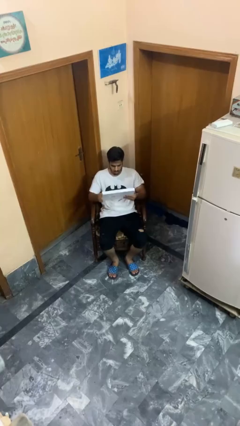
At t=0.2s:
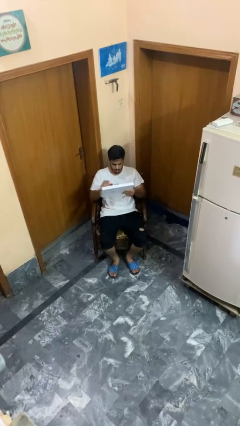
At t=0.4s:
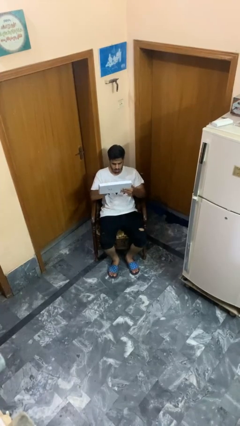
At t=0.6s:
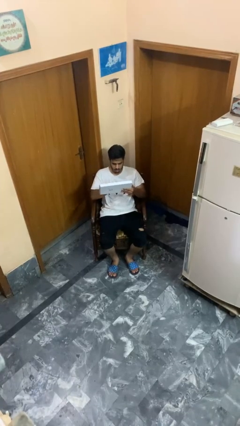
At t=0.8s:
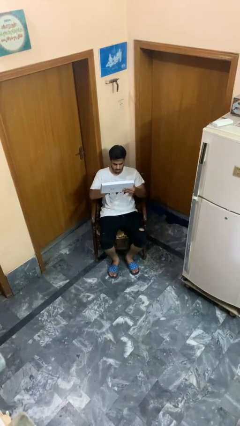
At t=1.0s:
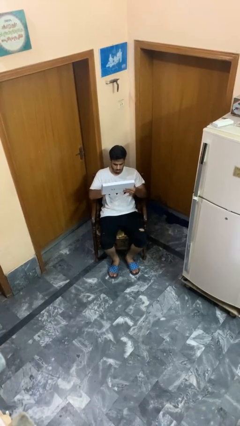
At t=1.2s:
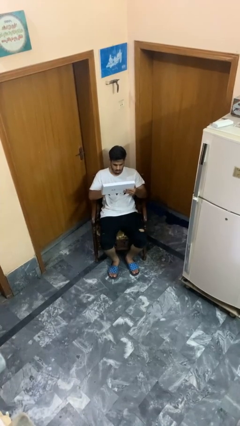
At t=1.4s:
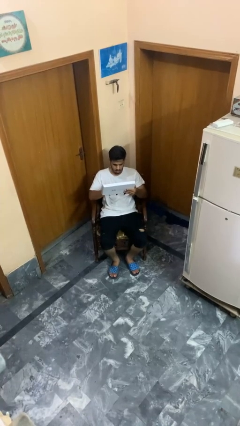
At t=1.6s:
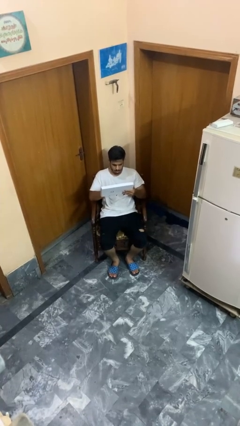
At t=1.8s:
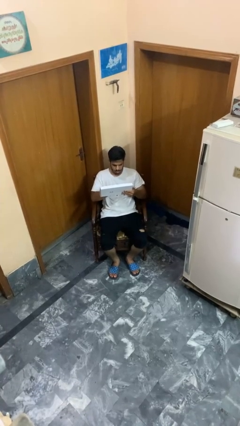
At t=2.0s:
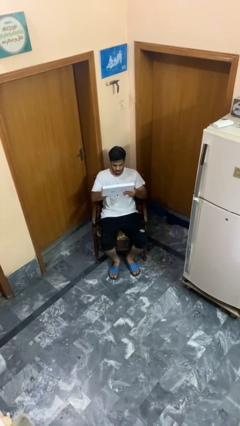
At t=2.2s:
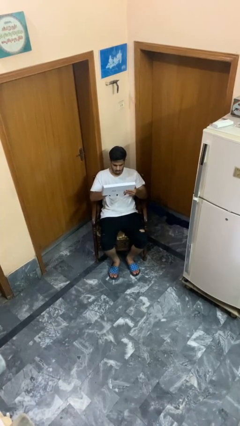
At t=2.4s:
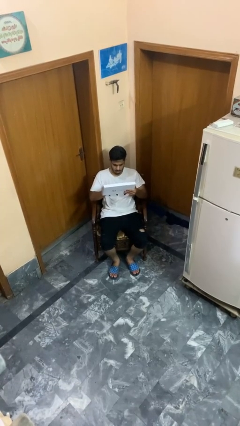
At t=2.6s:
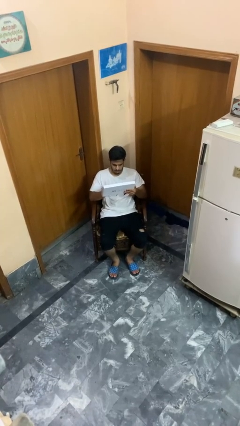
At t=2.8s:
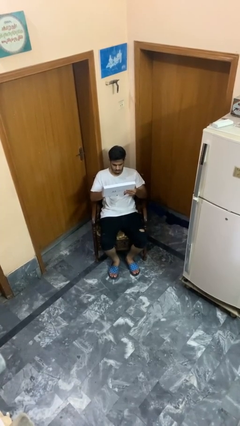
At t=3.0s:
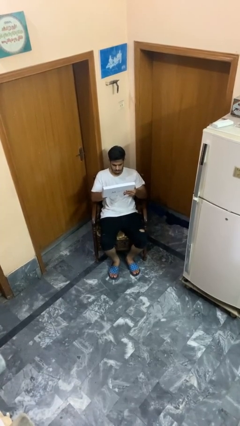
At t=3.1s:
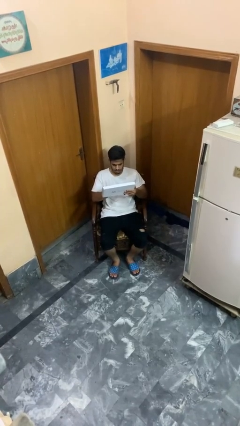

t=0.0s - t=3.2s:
person interacts with tablet

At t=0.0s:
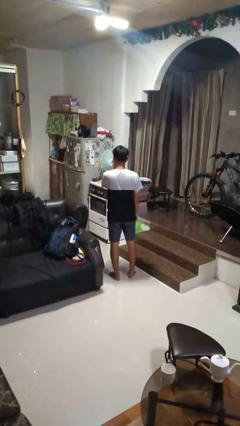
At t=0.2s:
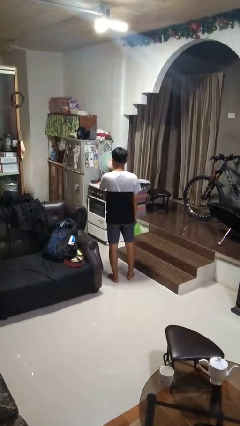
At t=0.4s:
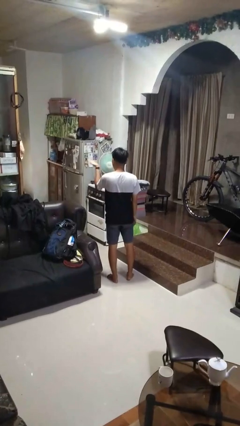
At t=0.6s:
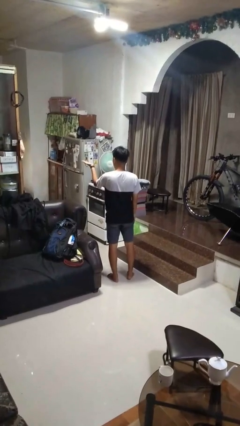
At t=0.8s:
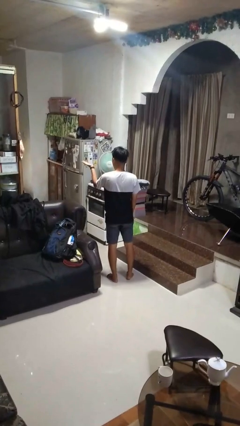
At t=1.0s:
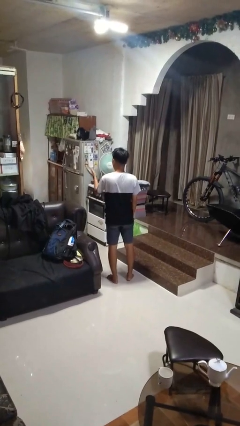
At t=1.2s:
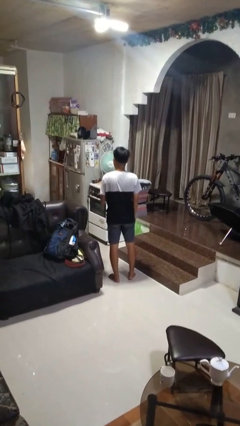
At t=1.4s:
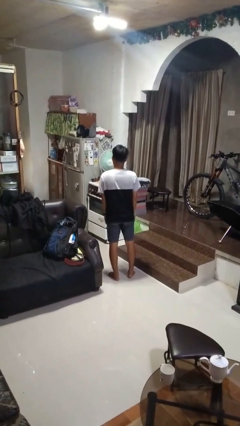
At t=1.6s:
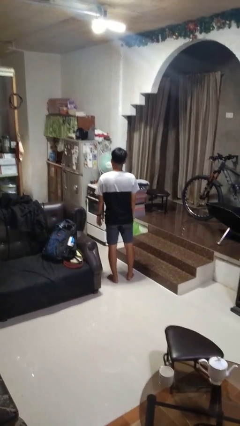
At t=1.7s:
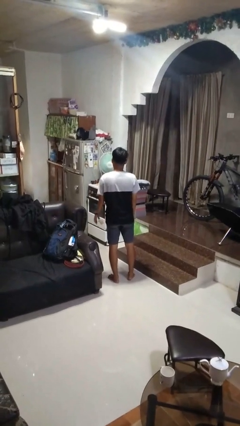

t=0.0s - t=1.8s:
person gestures blow kiss

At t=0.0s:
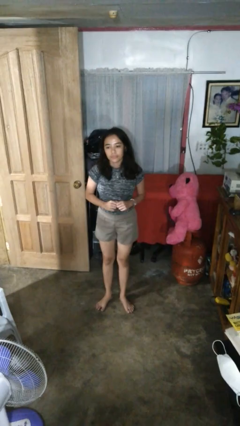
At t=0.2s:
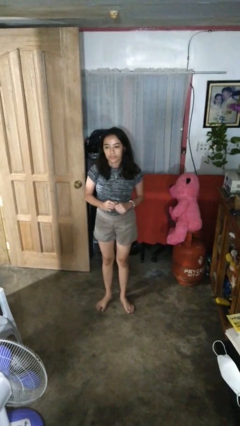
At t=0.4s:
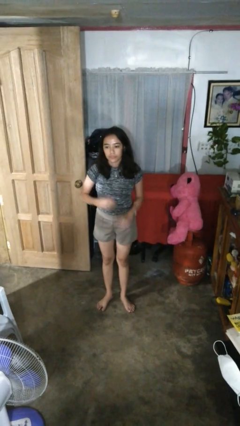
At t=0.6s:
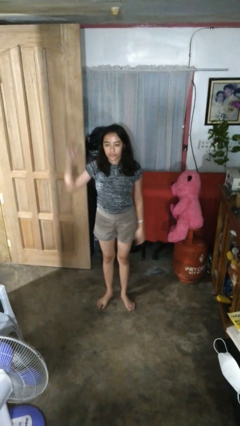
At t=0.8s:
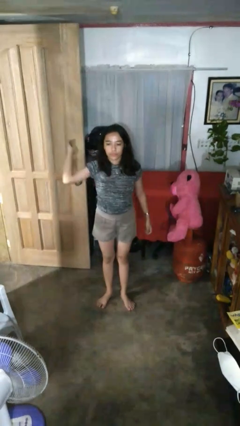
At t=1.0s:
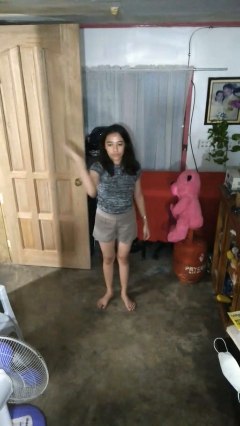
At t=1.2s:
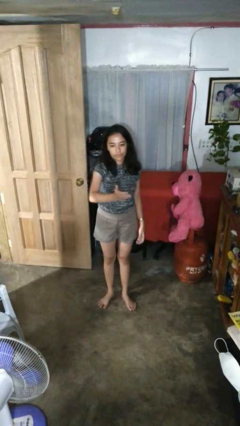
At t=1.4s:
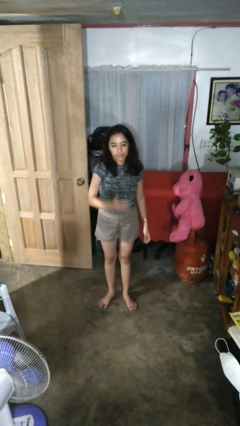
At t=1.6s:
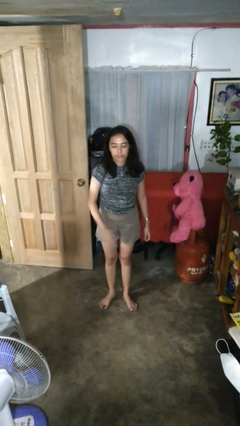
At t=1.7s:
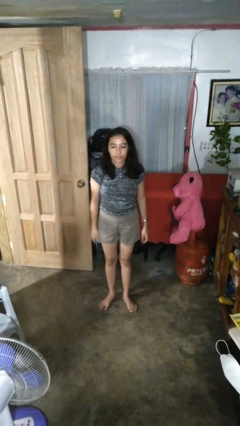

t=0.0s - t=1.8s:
person karate chop

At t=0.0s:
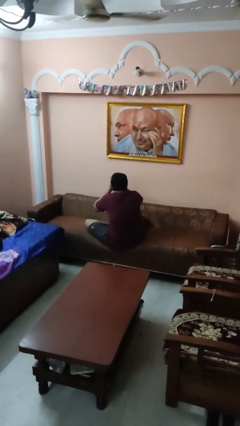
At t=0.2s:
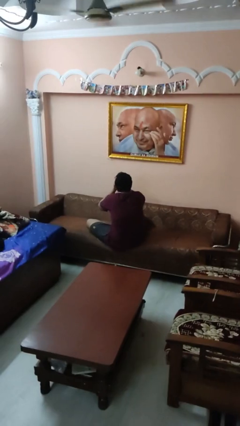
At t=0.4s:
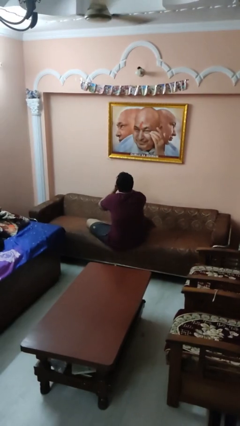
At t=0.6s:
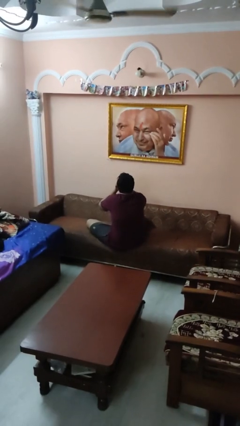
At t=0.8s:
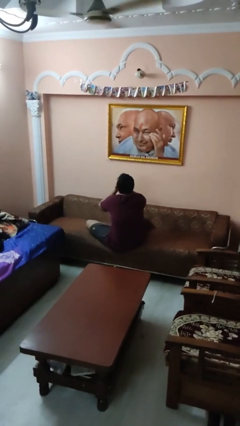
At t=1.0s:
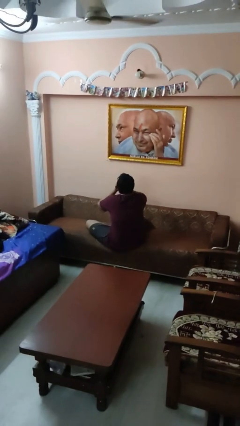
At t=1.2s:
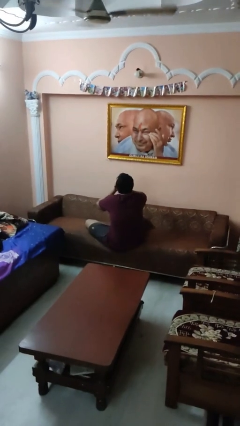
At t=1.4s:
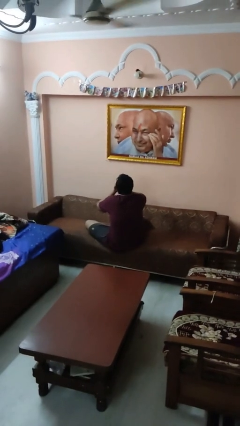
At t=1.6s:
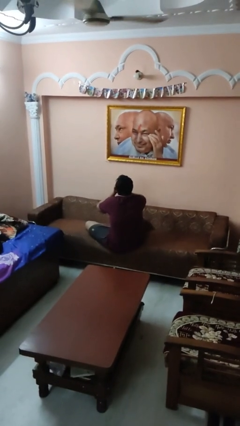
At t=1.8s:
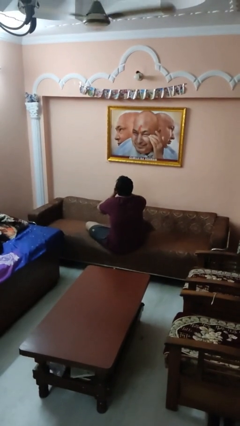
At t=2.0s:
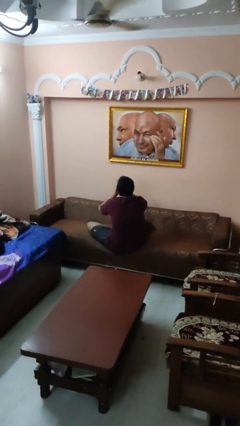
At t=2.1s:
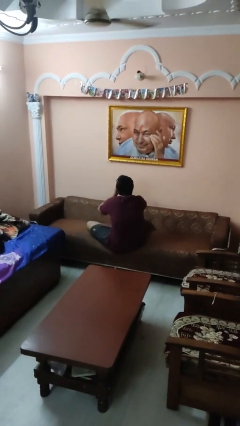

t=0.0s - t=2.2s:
person covers face with hands

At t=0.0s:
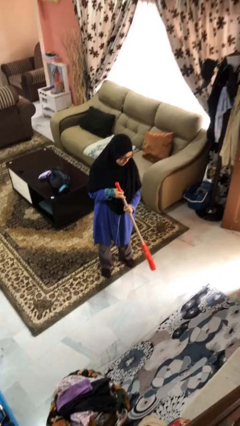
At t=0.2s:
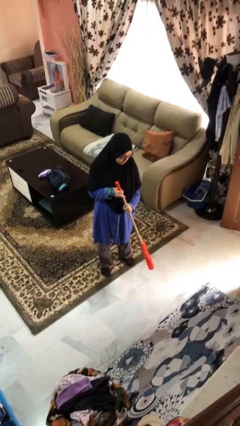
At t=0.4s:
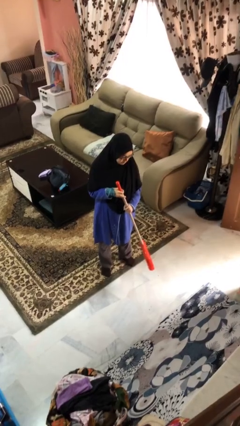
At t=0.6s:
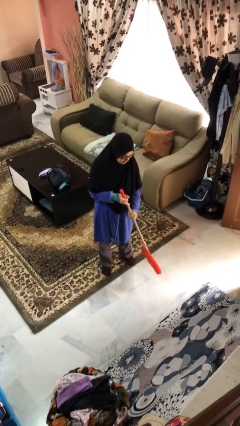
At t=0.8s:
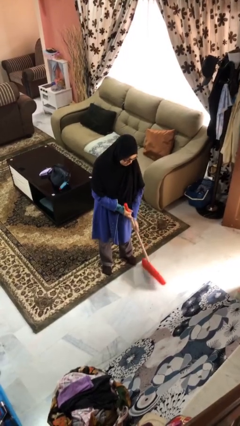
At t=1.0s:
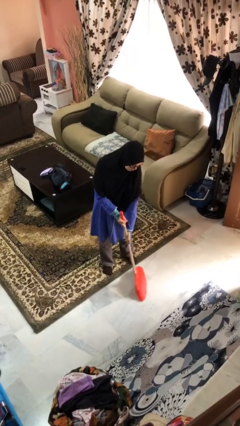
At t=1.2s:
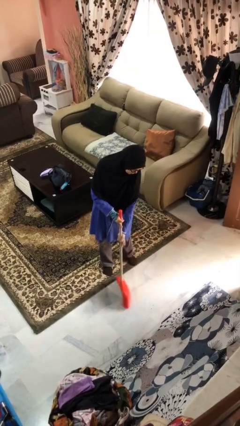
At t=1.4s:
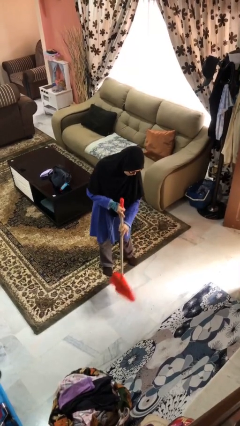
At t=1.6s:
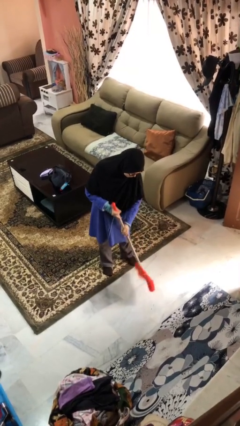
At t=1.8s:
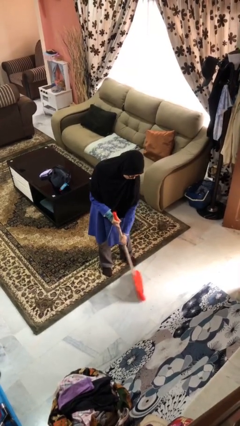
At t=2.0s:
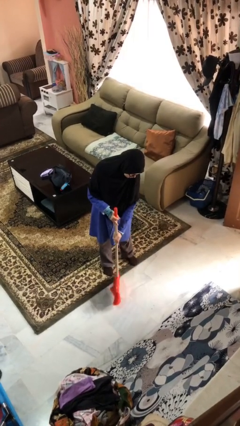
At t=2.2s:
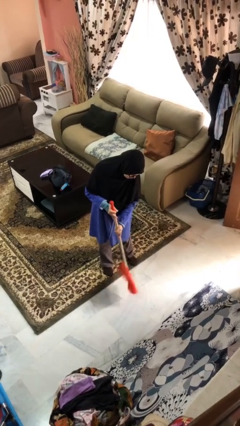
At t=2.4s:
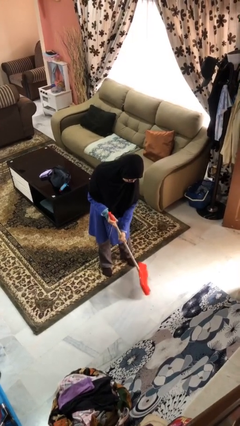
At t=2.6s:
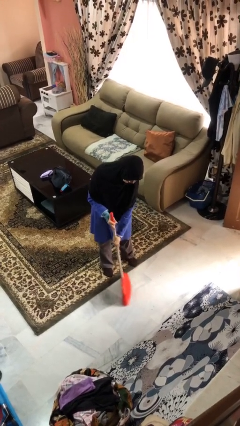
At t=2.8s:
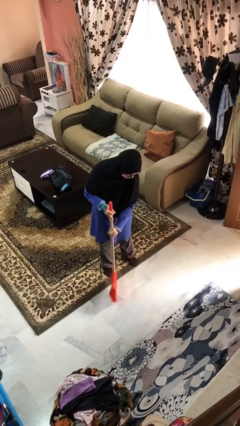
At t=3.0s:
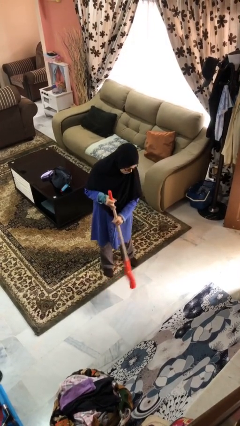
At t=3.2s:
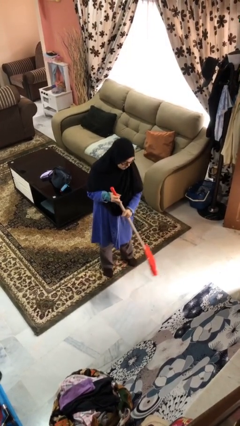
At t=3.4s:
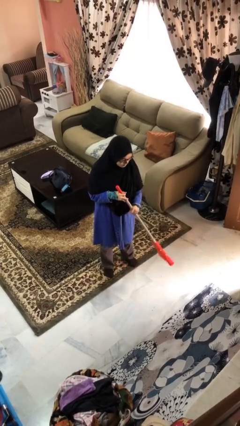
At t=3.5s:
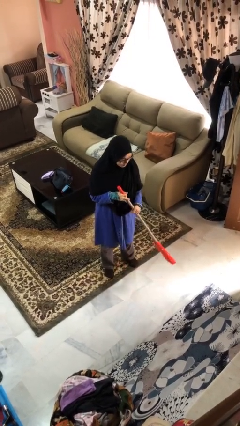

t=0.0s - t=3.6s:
person sweeps floor

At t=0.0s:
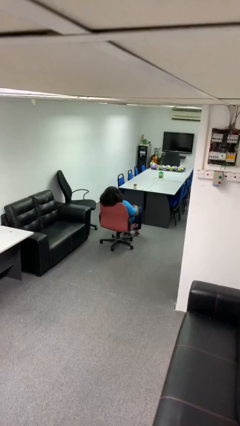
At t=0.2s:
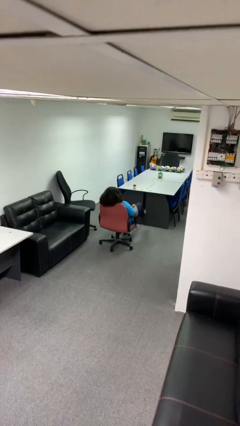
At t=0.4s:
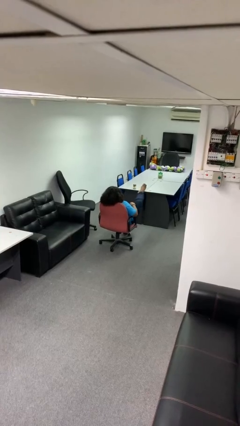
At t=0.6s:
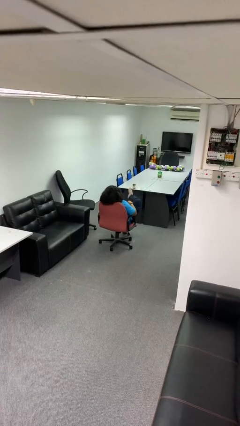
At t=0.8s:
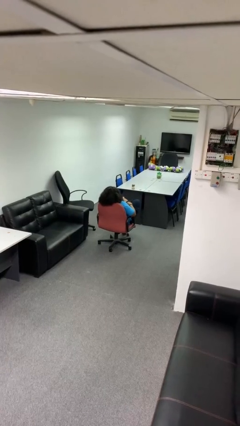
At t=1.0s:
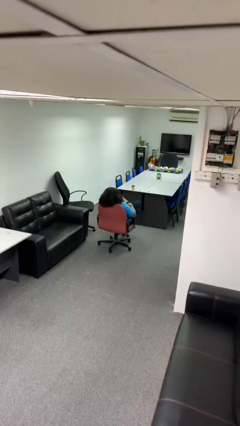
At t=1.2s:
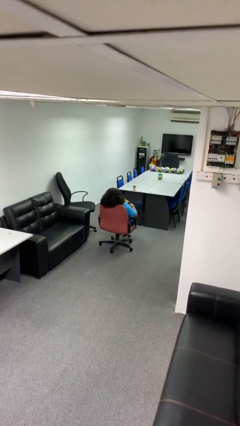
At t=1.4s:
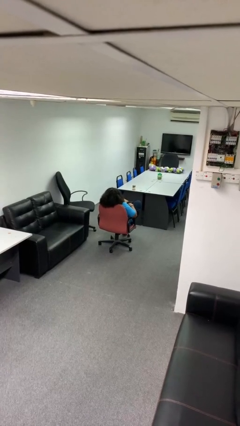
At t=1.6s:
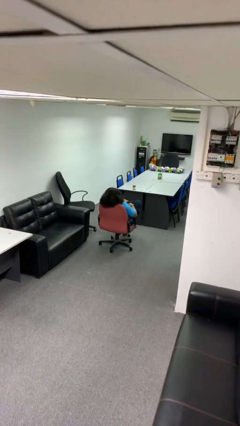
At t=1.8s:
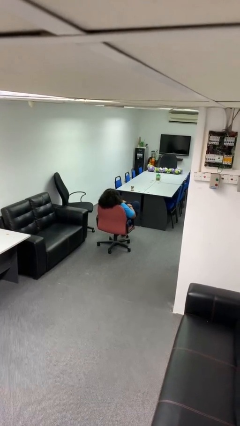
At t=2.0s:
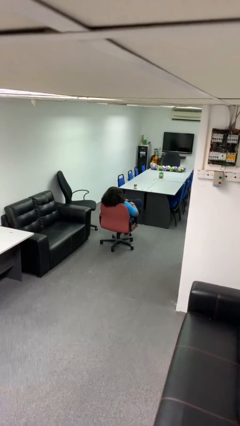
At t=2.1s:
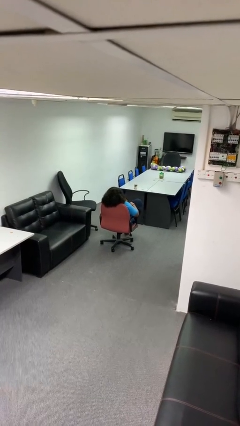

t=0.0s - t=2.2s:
person crosses legs

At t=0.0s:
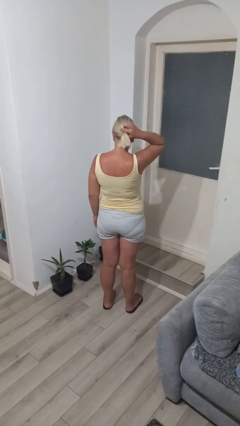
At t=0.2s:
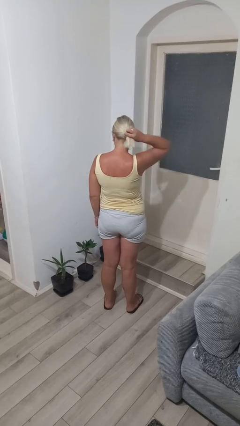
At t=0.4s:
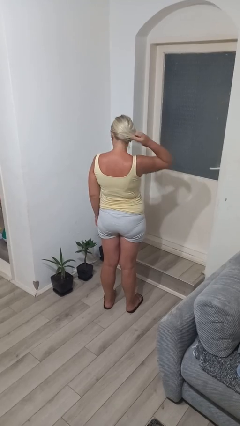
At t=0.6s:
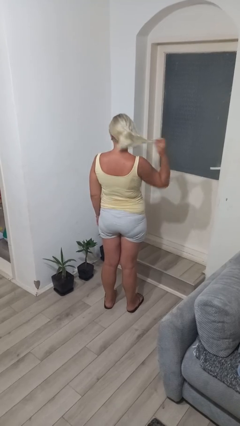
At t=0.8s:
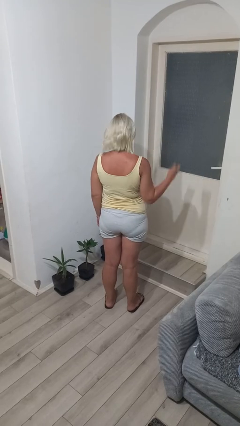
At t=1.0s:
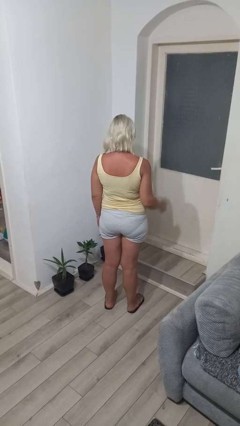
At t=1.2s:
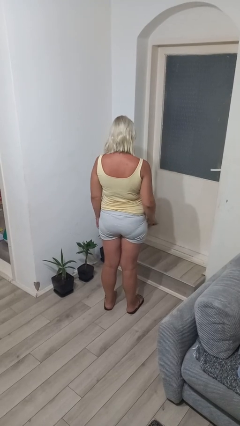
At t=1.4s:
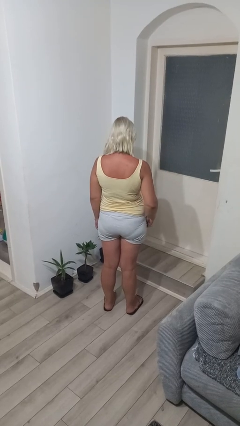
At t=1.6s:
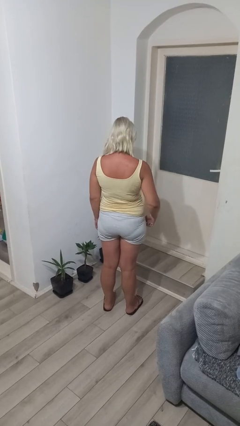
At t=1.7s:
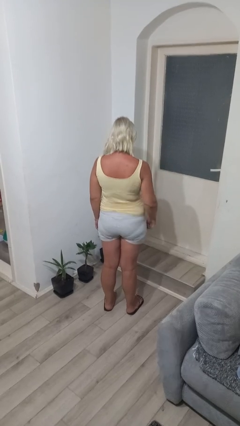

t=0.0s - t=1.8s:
person takes off hairtie

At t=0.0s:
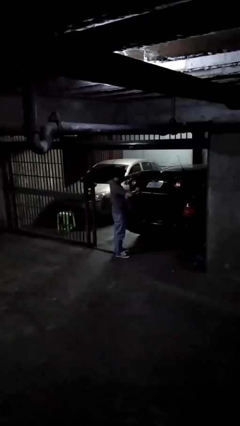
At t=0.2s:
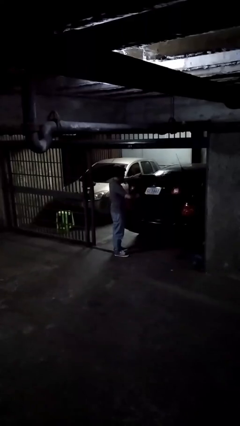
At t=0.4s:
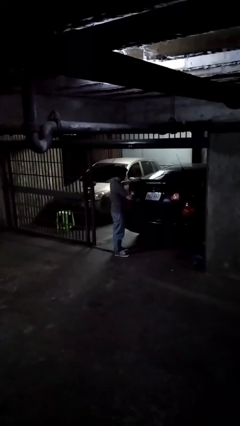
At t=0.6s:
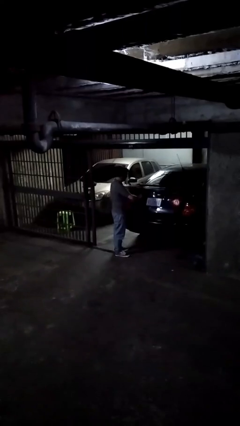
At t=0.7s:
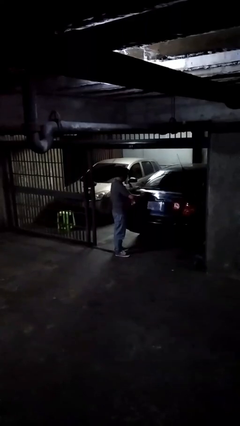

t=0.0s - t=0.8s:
person closes car trunk
